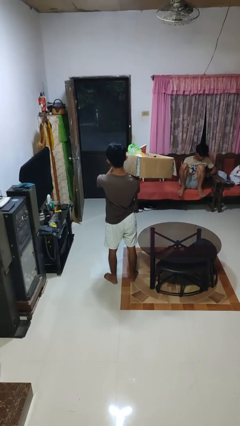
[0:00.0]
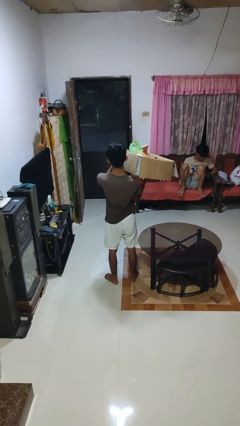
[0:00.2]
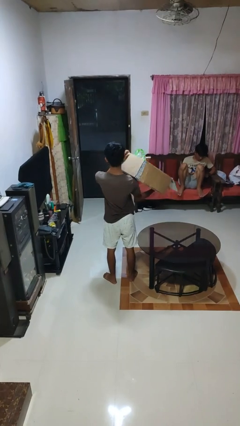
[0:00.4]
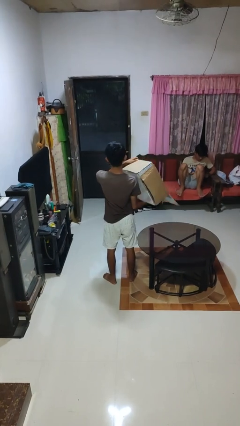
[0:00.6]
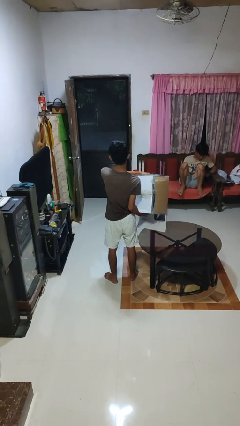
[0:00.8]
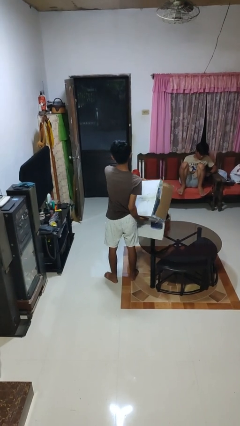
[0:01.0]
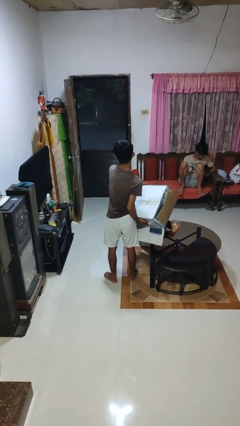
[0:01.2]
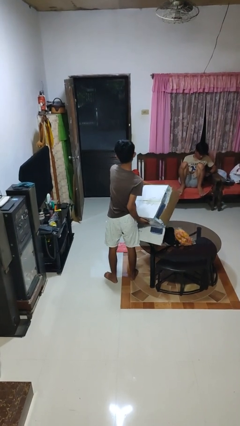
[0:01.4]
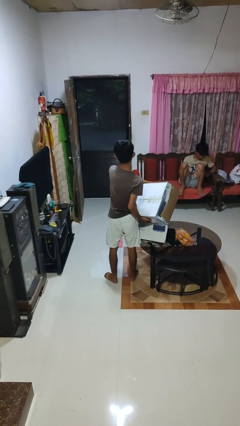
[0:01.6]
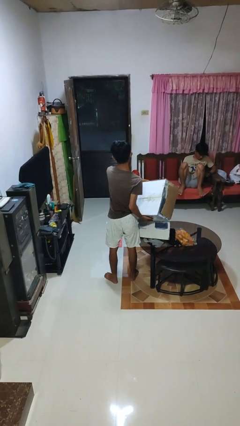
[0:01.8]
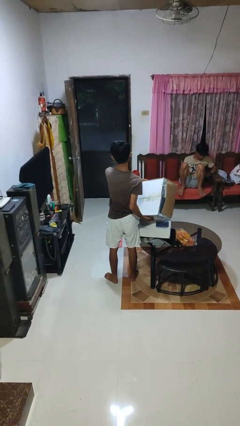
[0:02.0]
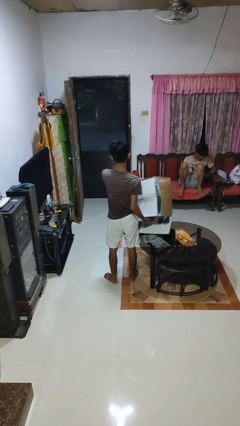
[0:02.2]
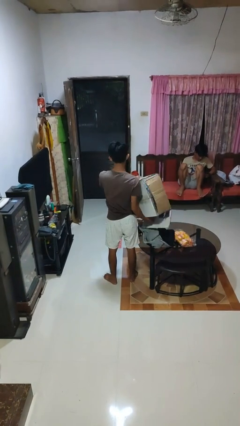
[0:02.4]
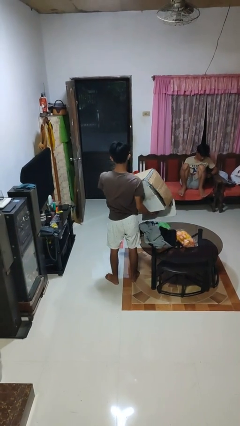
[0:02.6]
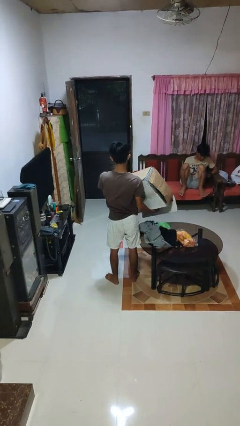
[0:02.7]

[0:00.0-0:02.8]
person unloads box onto table

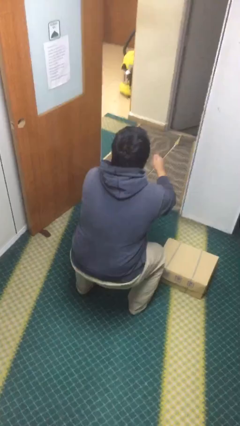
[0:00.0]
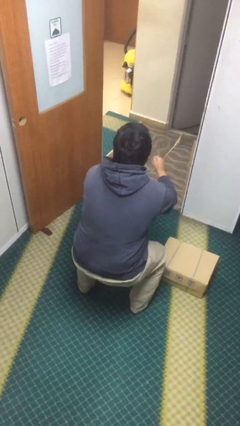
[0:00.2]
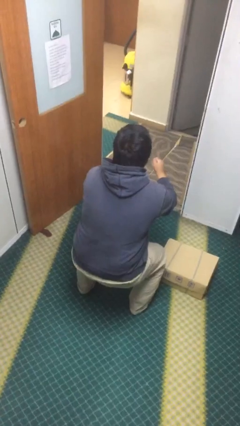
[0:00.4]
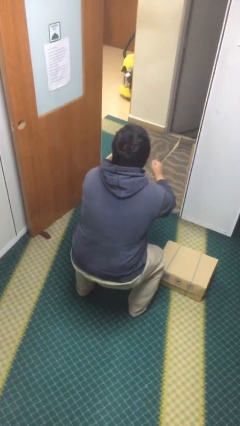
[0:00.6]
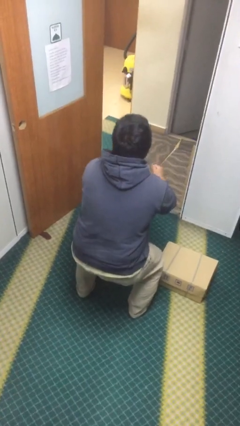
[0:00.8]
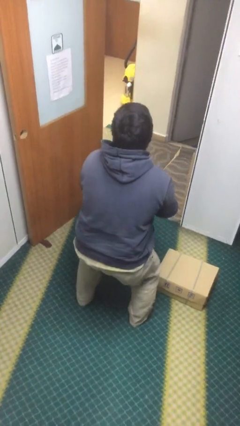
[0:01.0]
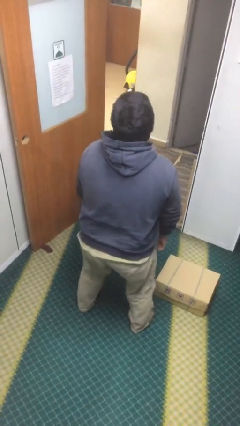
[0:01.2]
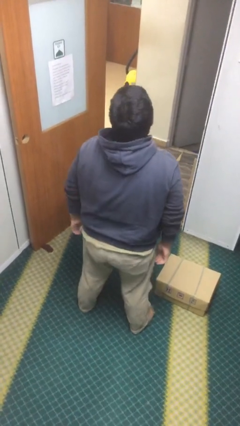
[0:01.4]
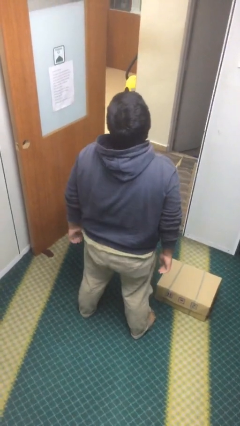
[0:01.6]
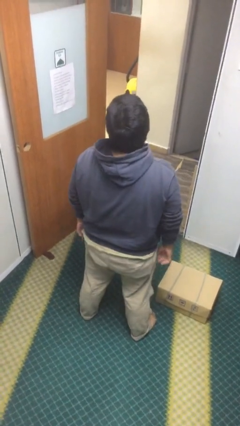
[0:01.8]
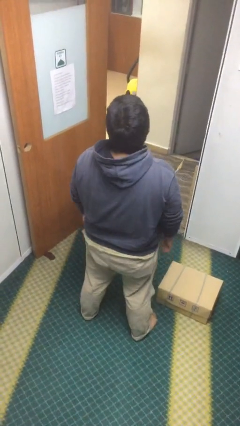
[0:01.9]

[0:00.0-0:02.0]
person stands up

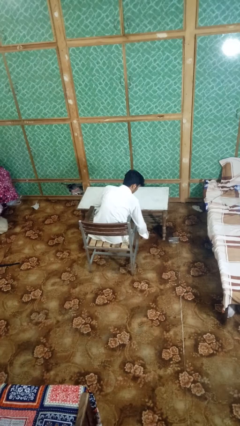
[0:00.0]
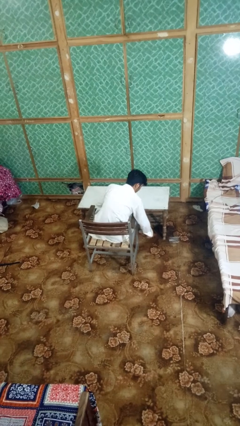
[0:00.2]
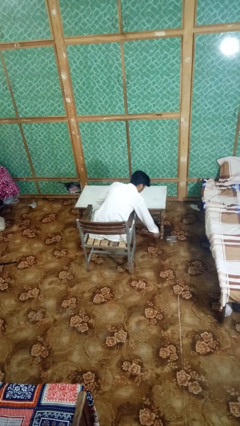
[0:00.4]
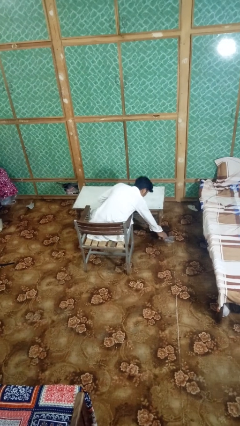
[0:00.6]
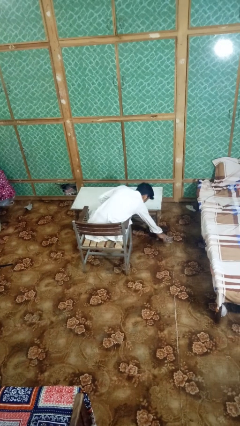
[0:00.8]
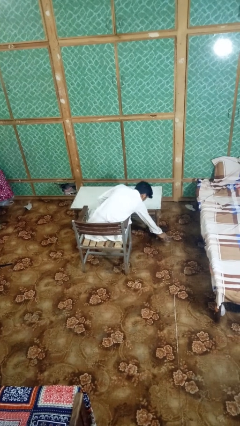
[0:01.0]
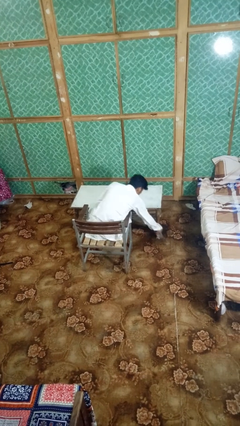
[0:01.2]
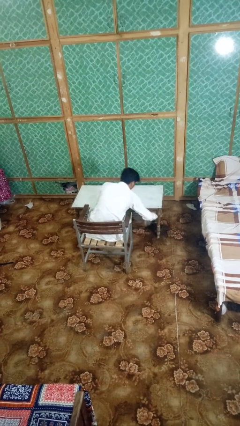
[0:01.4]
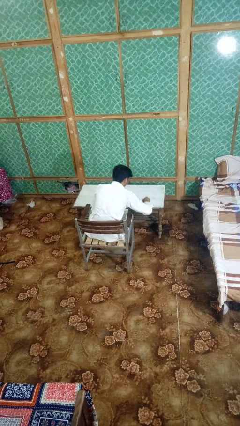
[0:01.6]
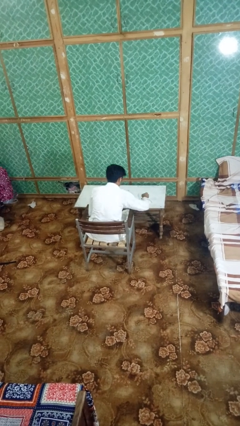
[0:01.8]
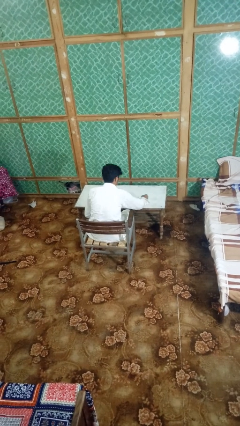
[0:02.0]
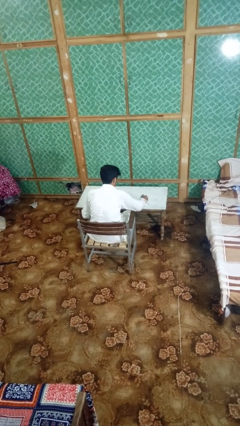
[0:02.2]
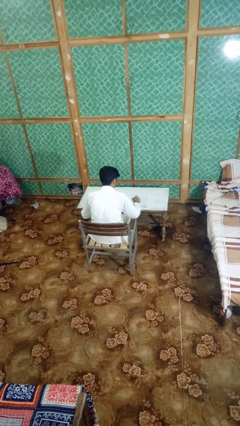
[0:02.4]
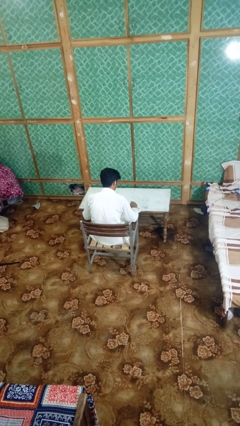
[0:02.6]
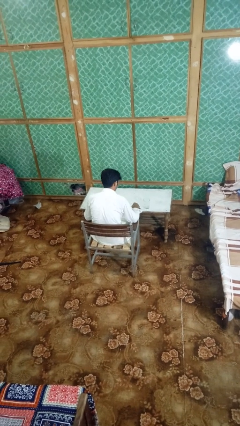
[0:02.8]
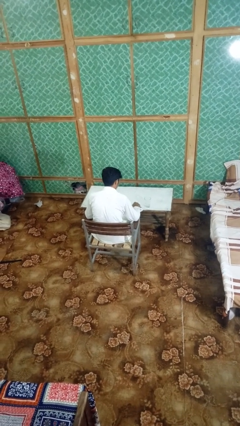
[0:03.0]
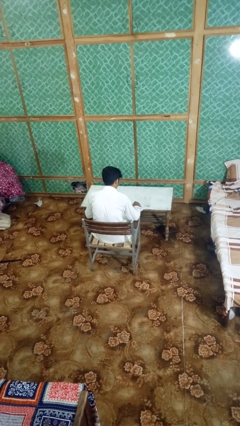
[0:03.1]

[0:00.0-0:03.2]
person sets upright glass

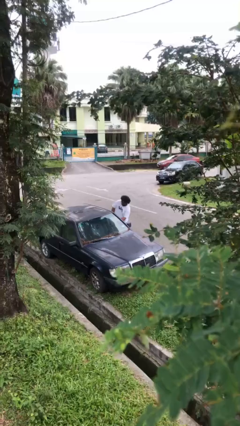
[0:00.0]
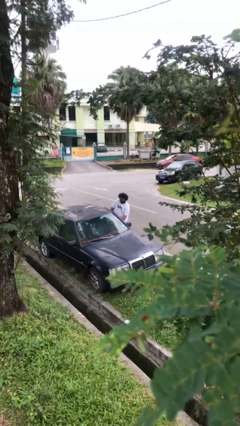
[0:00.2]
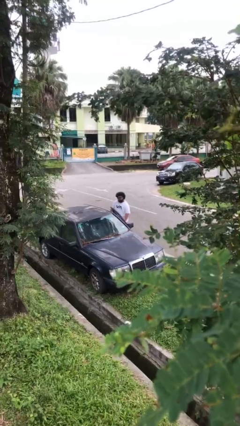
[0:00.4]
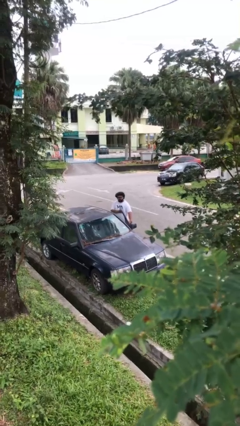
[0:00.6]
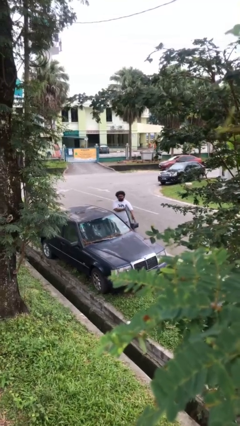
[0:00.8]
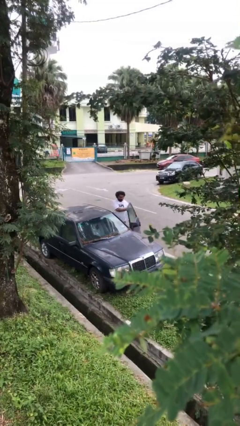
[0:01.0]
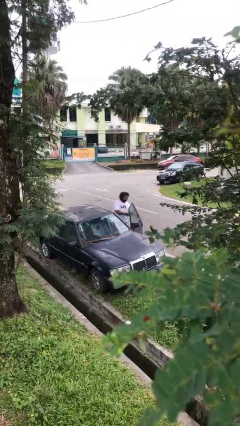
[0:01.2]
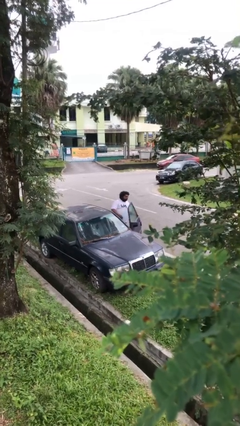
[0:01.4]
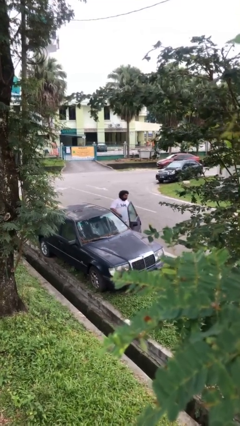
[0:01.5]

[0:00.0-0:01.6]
person opens car door

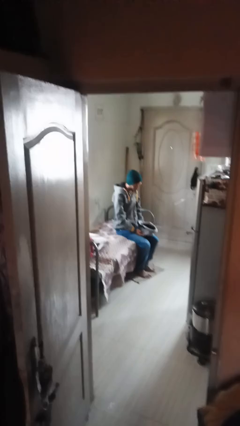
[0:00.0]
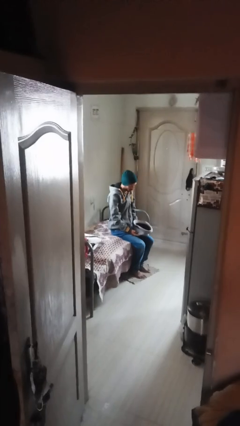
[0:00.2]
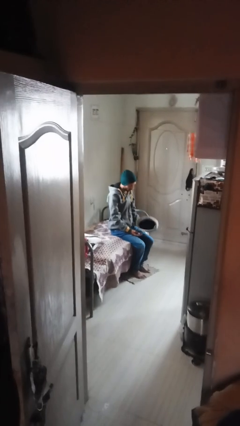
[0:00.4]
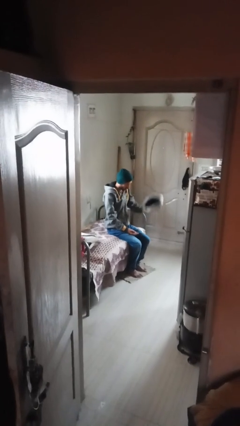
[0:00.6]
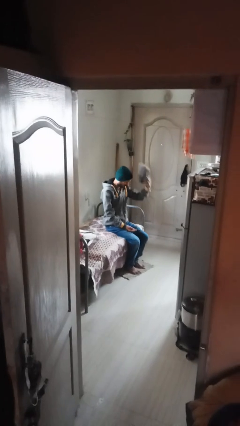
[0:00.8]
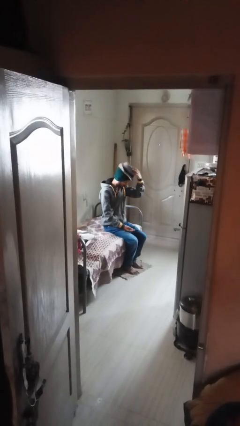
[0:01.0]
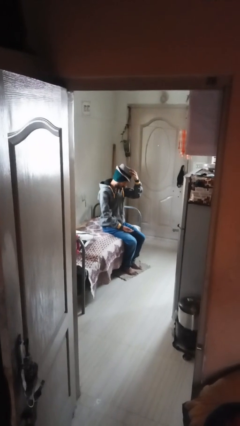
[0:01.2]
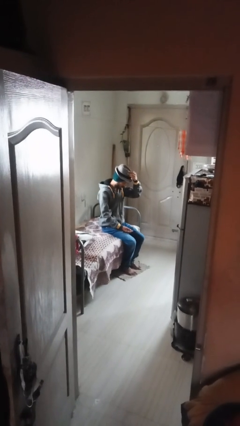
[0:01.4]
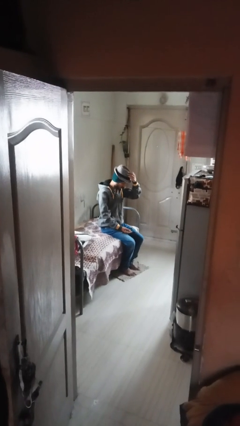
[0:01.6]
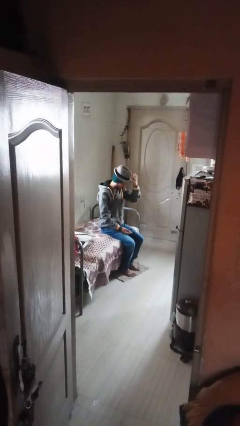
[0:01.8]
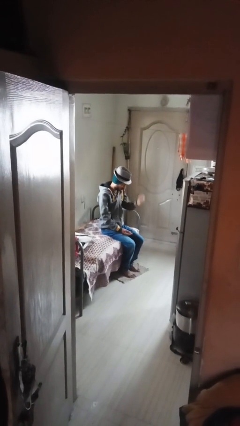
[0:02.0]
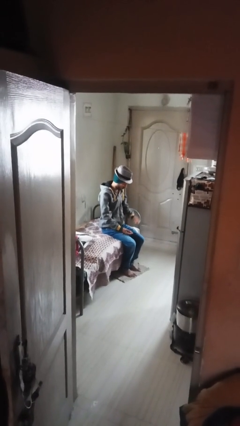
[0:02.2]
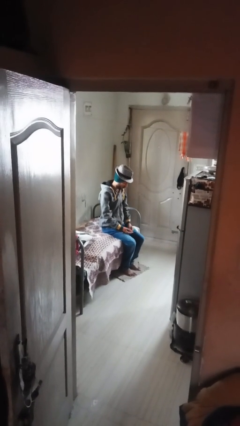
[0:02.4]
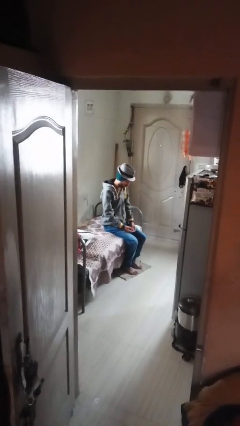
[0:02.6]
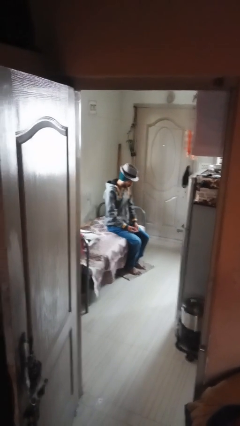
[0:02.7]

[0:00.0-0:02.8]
person puts on hat

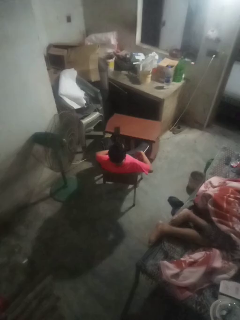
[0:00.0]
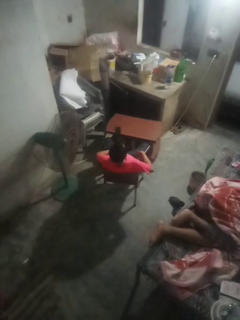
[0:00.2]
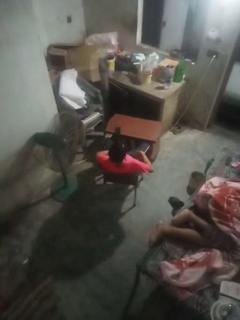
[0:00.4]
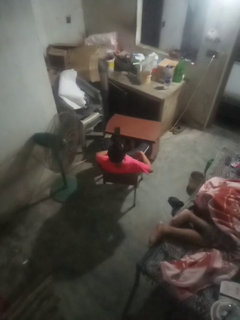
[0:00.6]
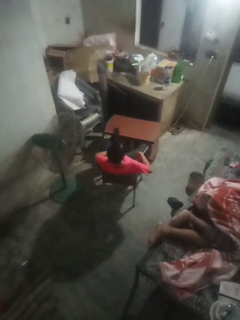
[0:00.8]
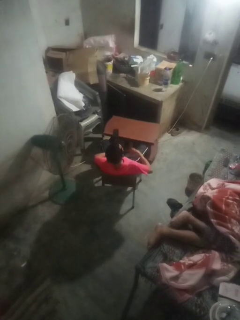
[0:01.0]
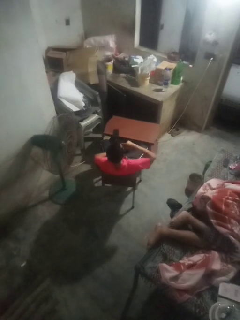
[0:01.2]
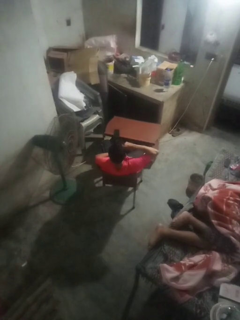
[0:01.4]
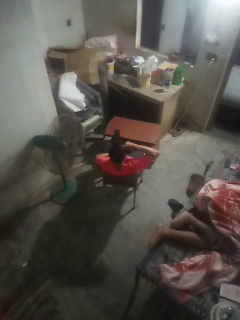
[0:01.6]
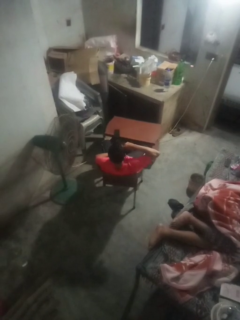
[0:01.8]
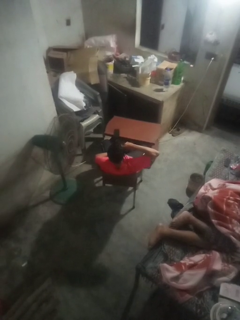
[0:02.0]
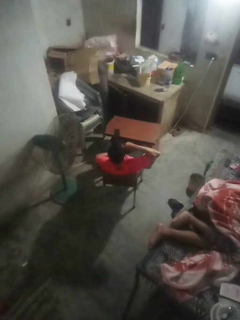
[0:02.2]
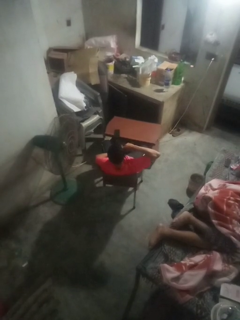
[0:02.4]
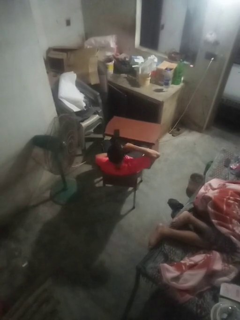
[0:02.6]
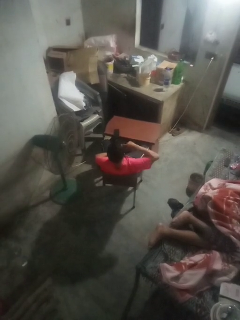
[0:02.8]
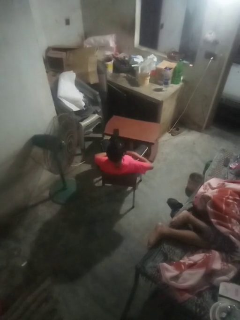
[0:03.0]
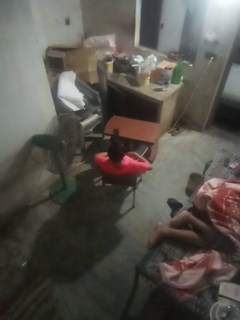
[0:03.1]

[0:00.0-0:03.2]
person licks fingers

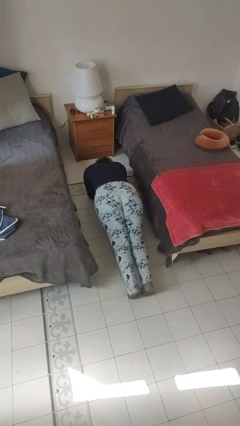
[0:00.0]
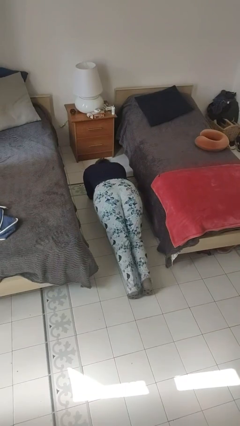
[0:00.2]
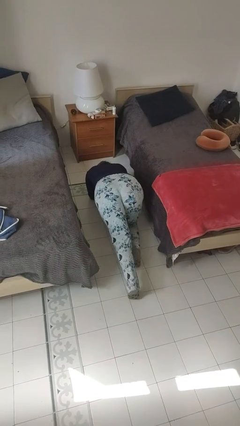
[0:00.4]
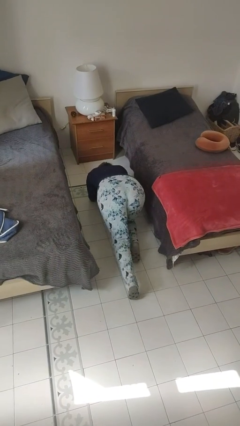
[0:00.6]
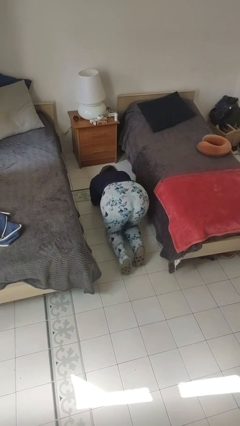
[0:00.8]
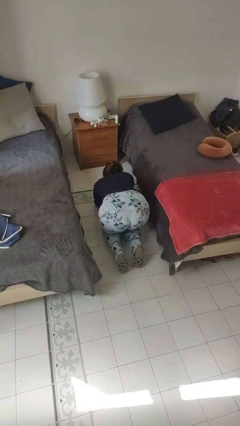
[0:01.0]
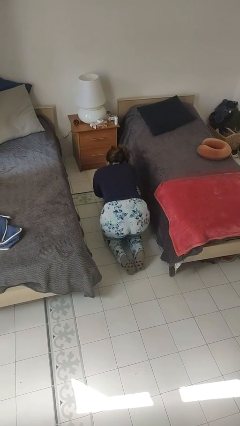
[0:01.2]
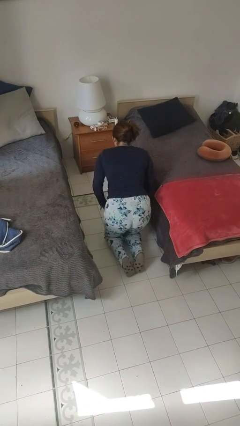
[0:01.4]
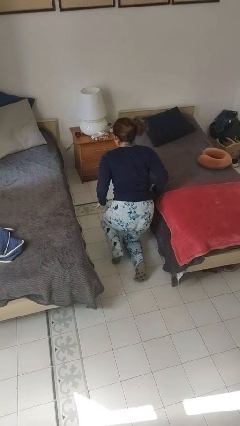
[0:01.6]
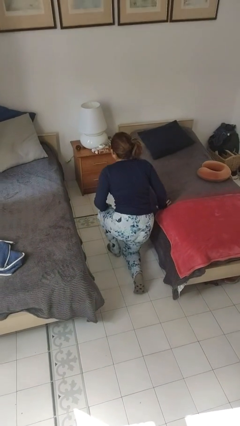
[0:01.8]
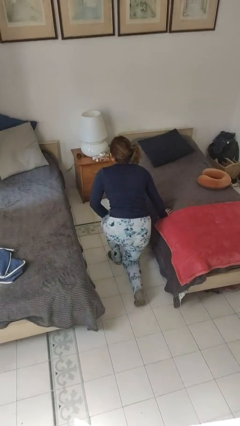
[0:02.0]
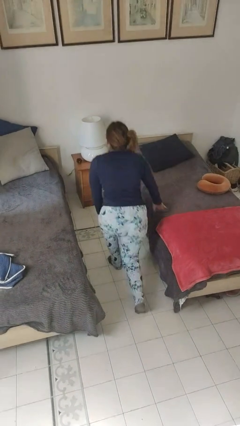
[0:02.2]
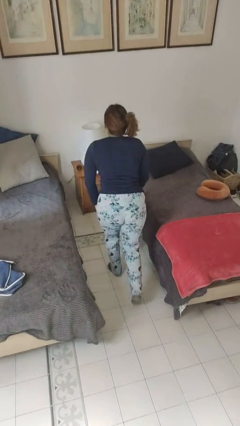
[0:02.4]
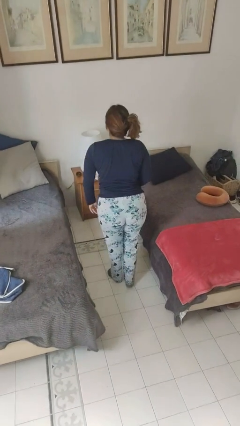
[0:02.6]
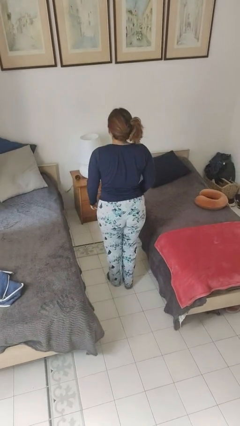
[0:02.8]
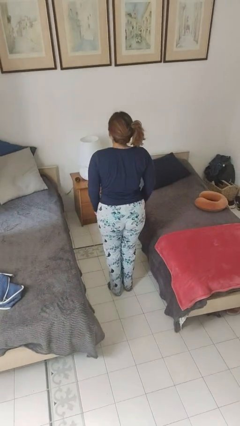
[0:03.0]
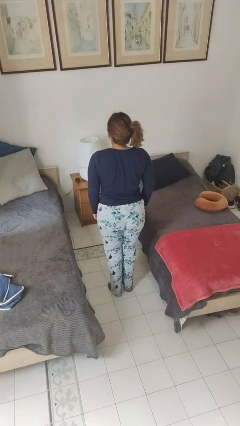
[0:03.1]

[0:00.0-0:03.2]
person stands up from floor
